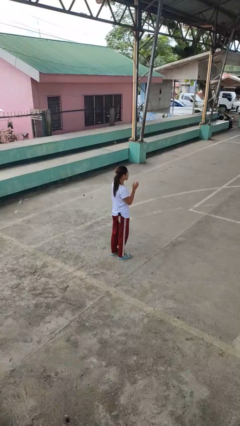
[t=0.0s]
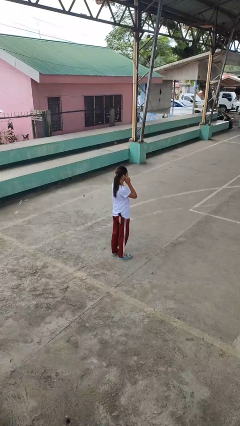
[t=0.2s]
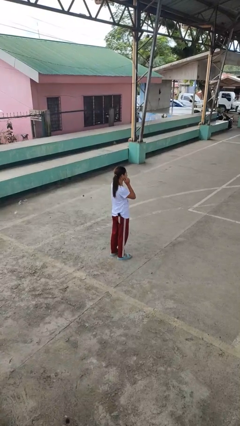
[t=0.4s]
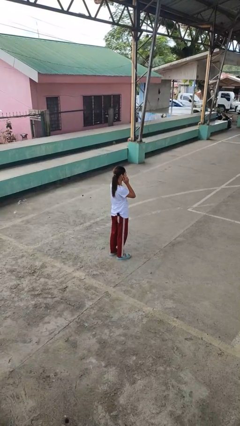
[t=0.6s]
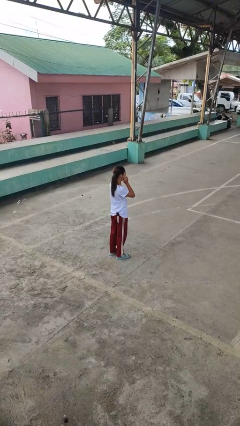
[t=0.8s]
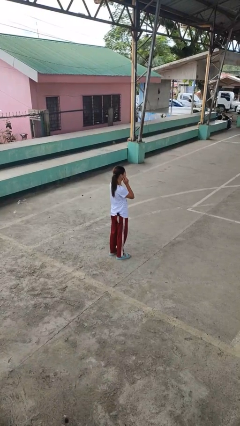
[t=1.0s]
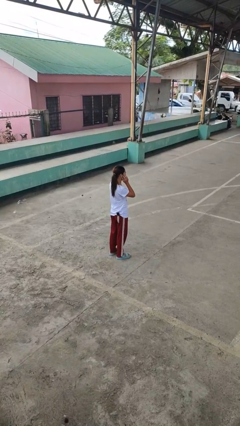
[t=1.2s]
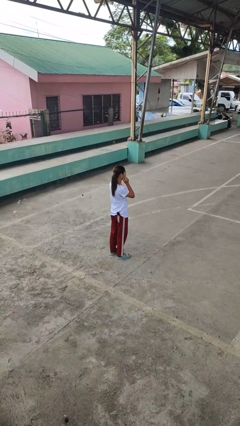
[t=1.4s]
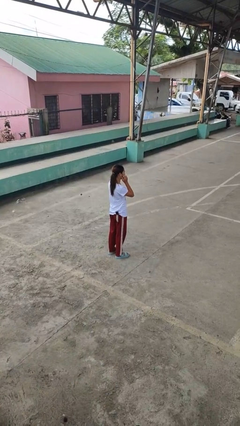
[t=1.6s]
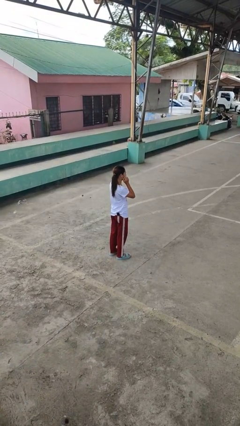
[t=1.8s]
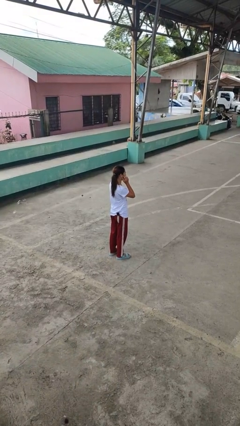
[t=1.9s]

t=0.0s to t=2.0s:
person scratches face

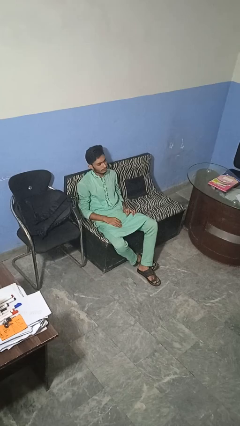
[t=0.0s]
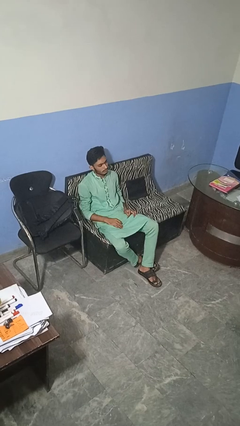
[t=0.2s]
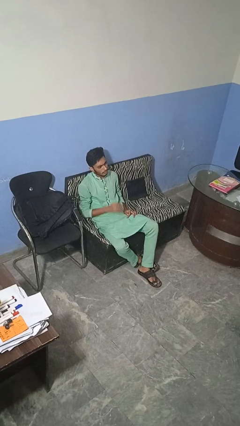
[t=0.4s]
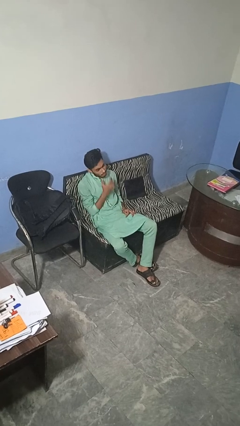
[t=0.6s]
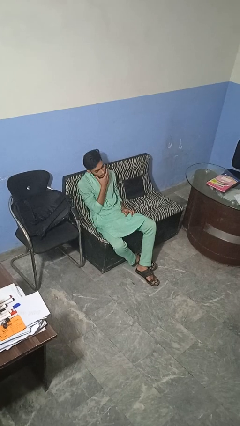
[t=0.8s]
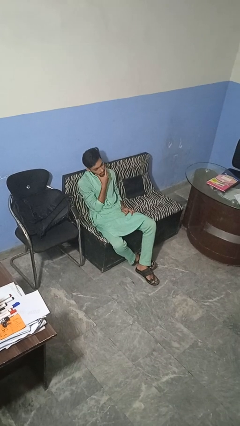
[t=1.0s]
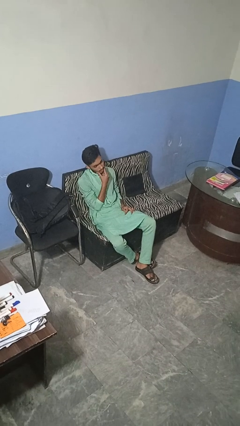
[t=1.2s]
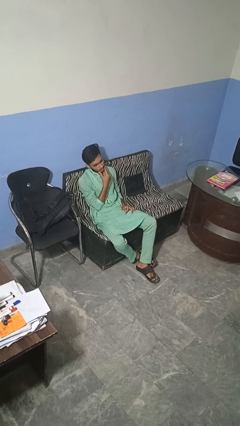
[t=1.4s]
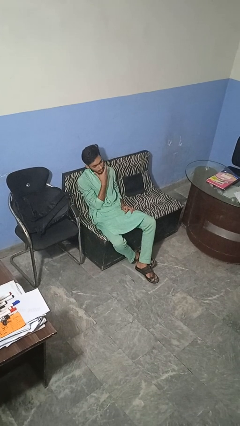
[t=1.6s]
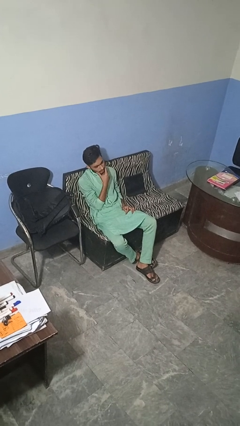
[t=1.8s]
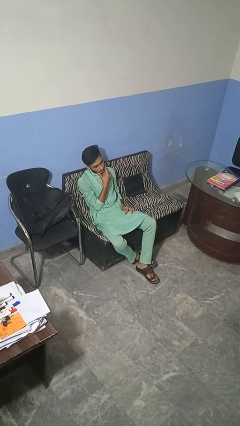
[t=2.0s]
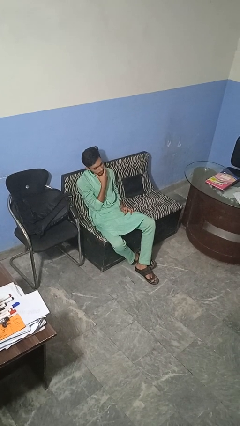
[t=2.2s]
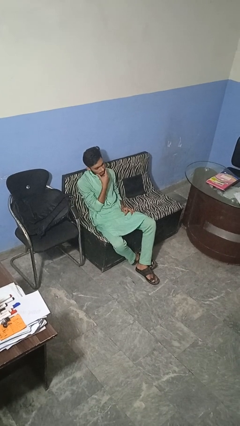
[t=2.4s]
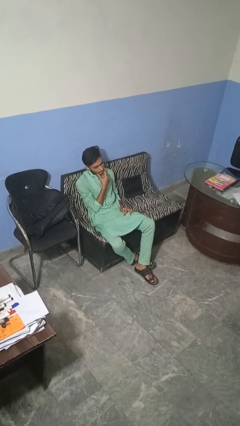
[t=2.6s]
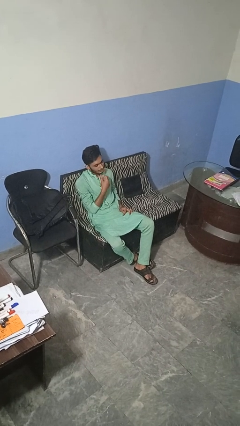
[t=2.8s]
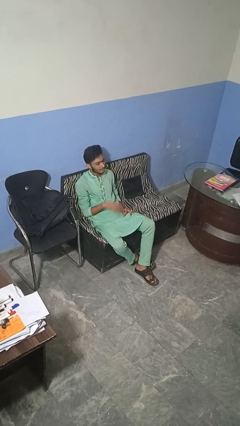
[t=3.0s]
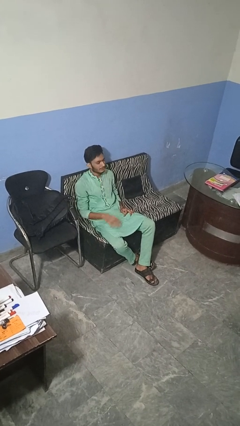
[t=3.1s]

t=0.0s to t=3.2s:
person strokes chin

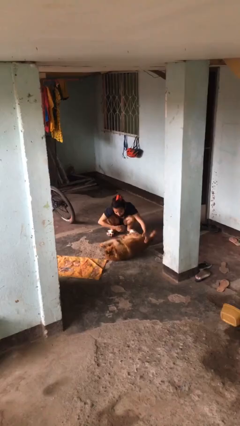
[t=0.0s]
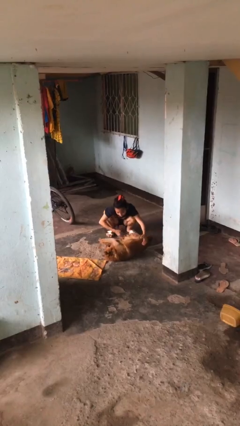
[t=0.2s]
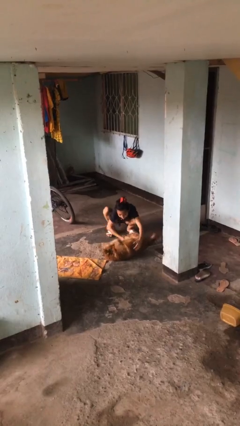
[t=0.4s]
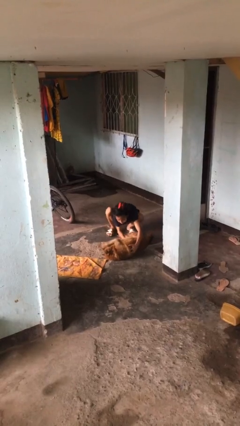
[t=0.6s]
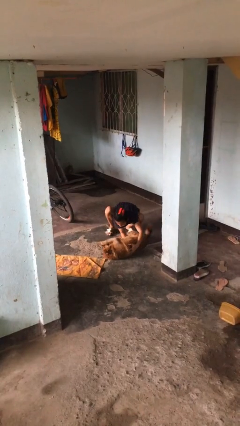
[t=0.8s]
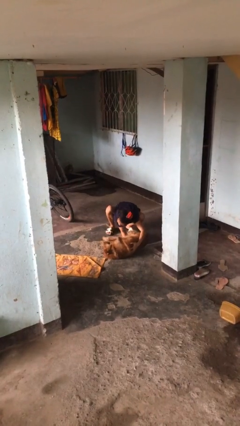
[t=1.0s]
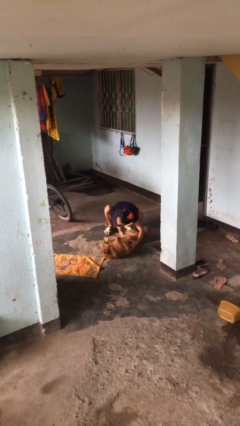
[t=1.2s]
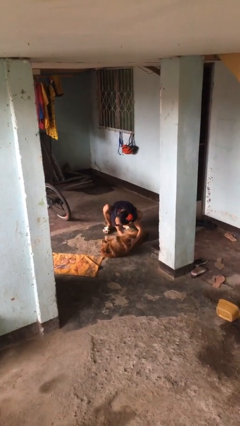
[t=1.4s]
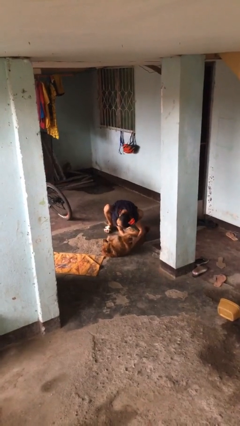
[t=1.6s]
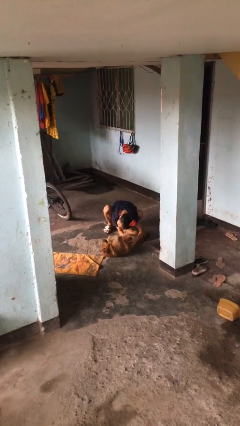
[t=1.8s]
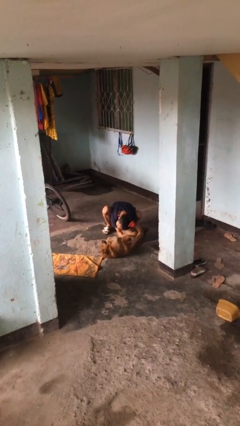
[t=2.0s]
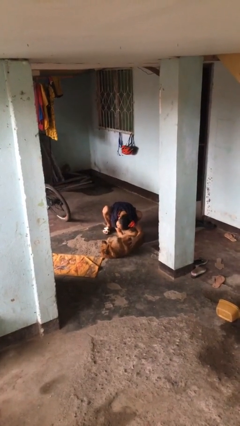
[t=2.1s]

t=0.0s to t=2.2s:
person hugs dog

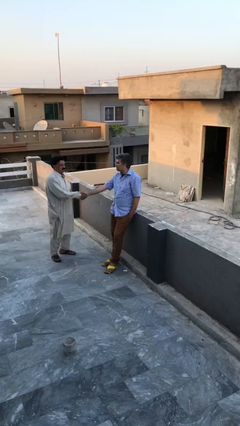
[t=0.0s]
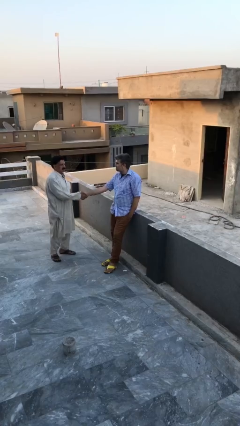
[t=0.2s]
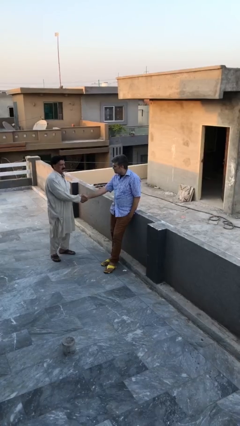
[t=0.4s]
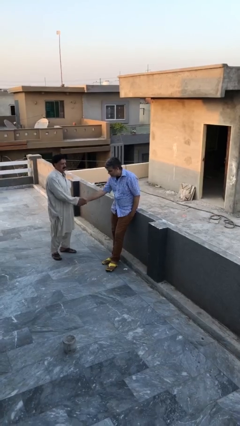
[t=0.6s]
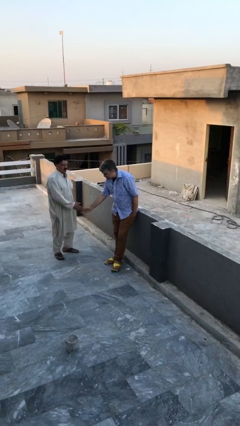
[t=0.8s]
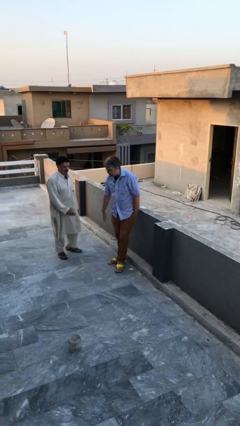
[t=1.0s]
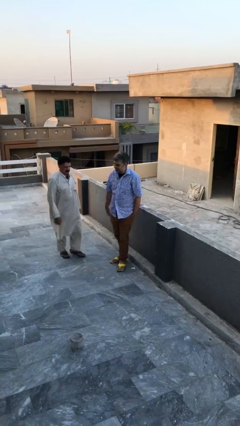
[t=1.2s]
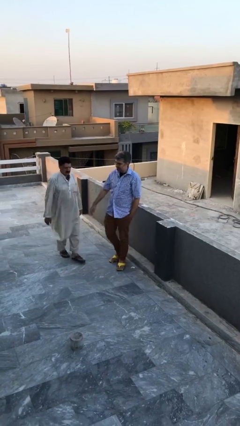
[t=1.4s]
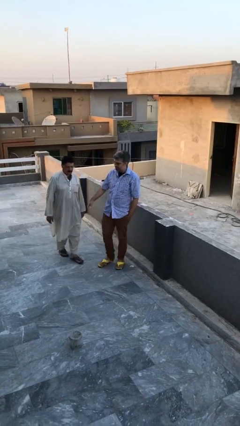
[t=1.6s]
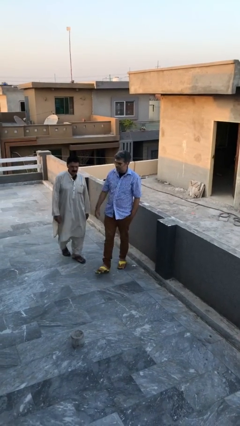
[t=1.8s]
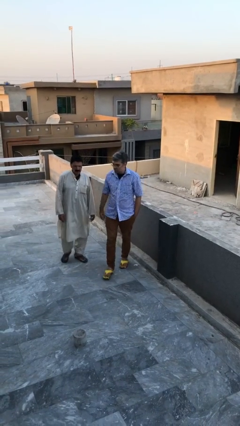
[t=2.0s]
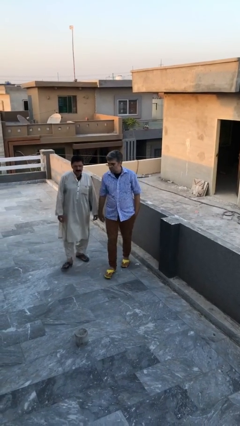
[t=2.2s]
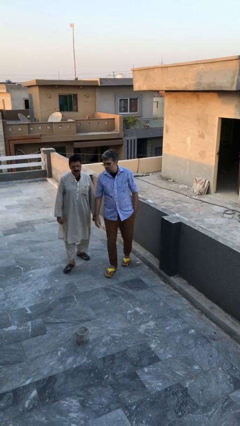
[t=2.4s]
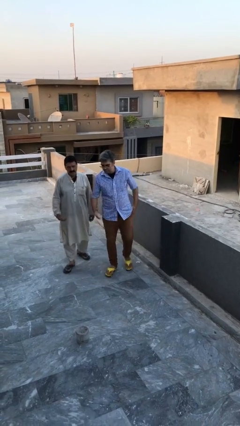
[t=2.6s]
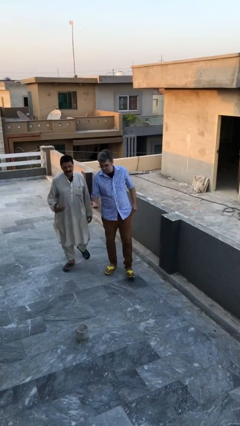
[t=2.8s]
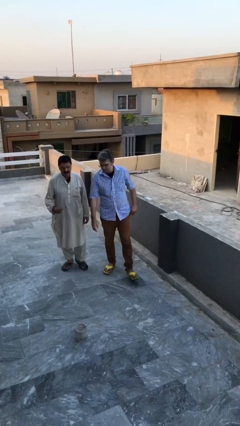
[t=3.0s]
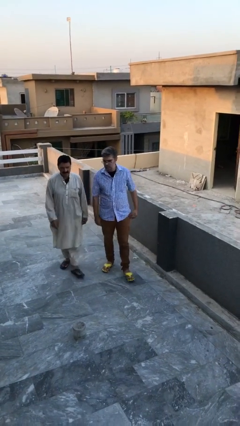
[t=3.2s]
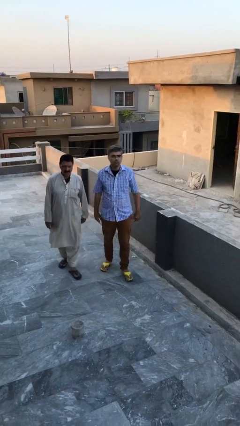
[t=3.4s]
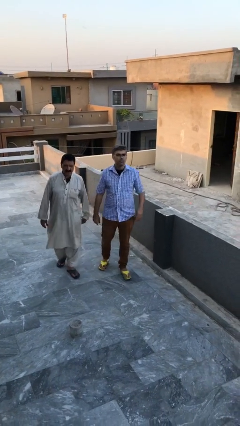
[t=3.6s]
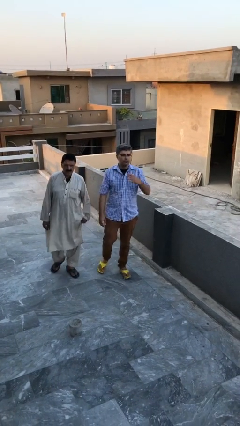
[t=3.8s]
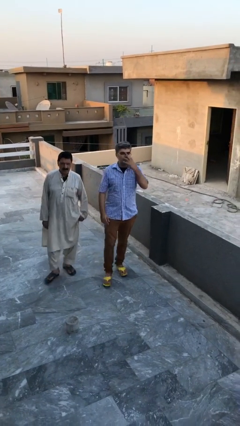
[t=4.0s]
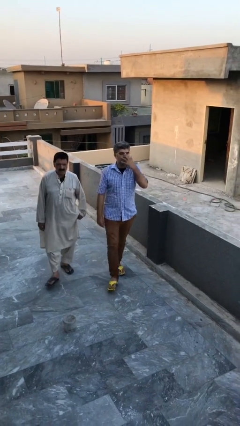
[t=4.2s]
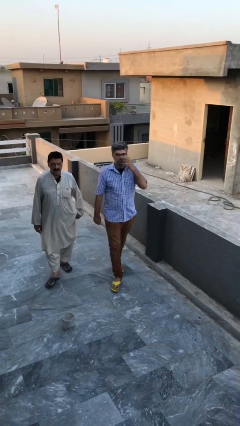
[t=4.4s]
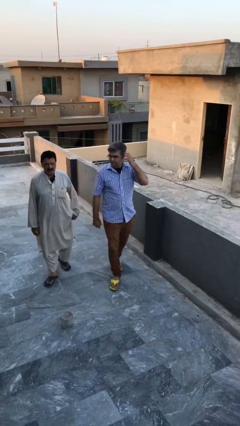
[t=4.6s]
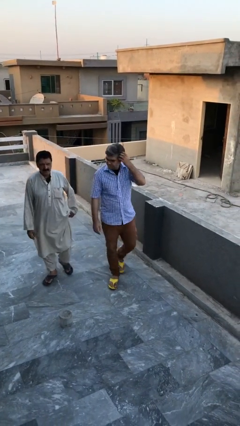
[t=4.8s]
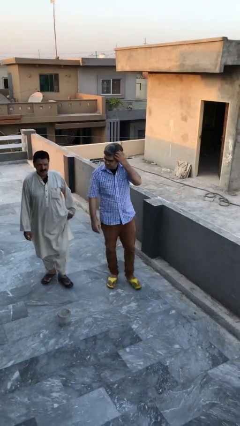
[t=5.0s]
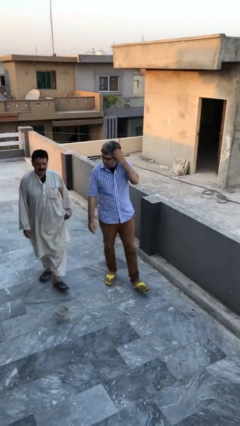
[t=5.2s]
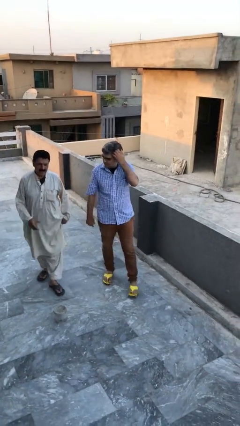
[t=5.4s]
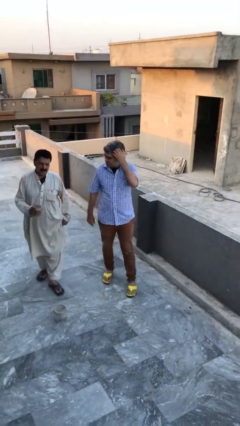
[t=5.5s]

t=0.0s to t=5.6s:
person talks to person

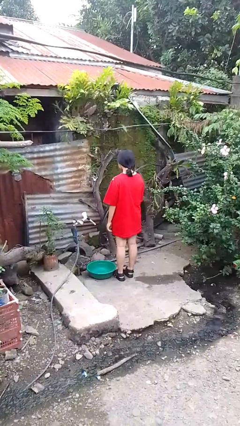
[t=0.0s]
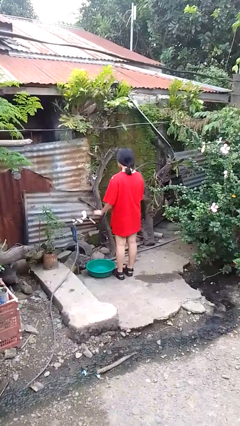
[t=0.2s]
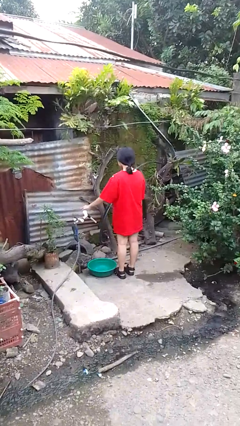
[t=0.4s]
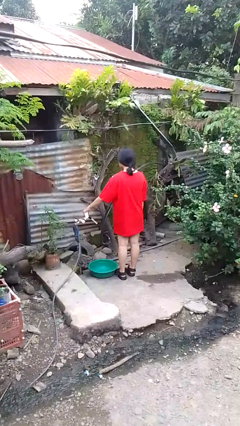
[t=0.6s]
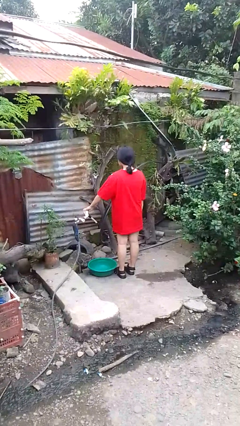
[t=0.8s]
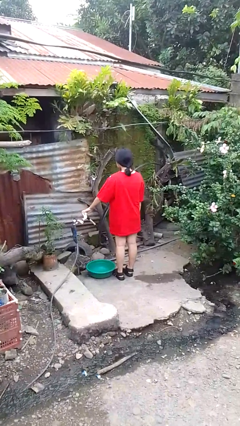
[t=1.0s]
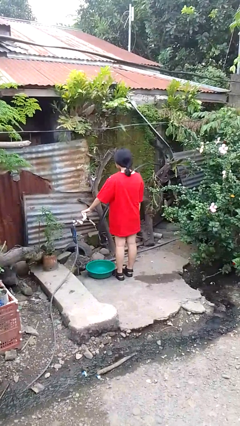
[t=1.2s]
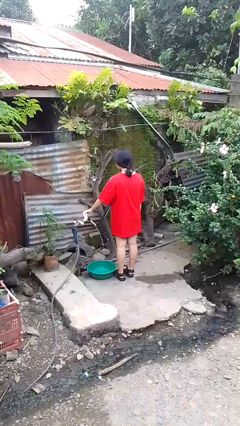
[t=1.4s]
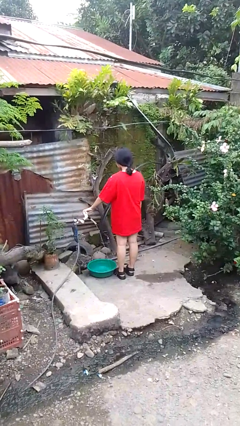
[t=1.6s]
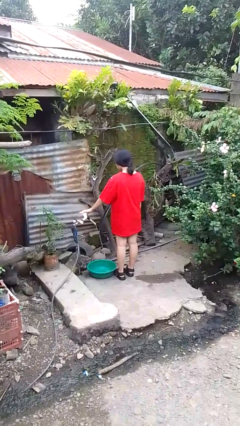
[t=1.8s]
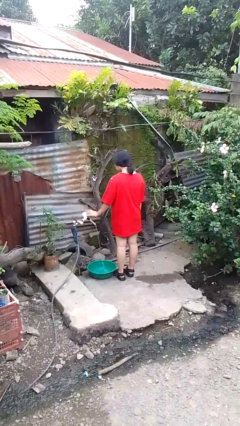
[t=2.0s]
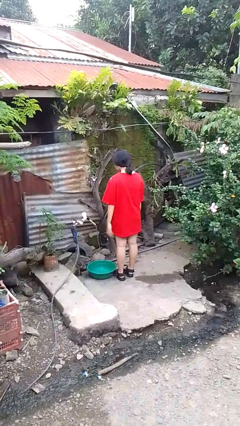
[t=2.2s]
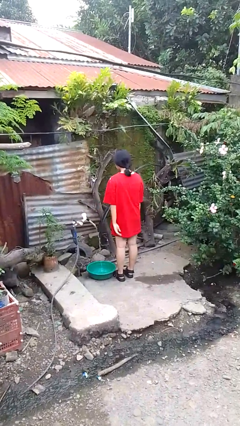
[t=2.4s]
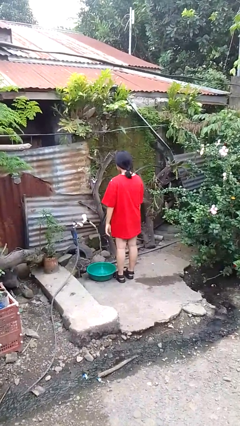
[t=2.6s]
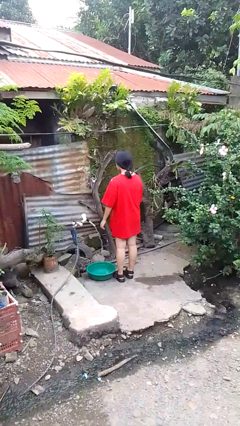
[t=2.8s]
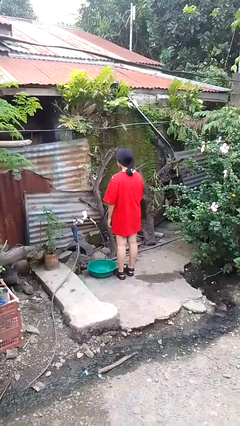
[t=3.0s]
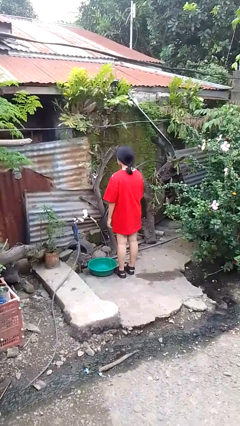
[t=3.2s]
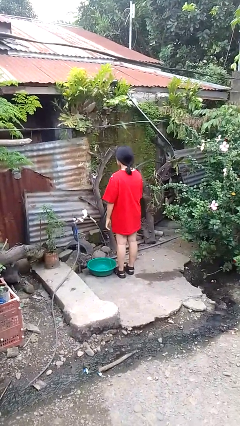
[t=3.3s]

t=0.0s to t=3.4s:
person turns on faucet

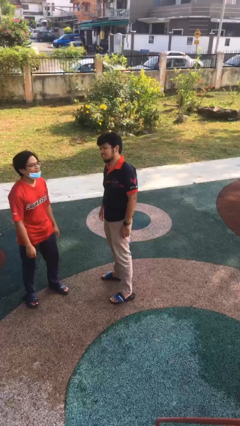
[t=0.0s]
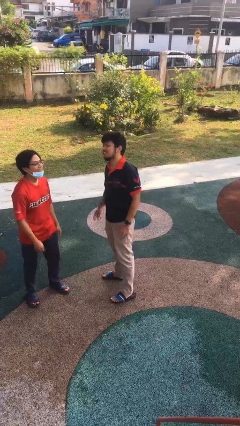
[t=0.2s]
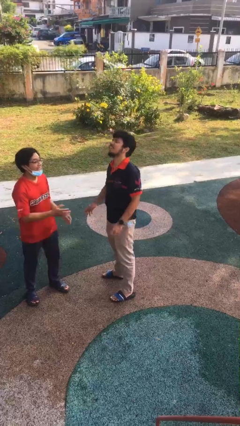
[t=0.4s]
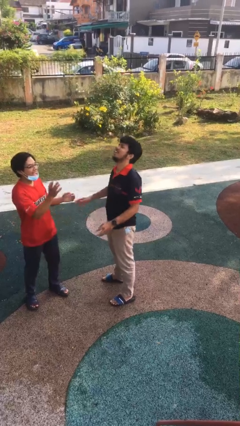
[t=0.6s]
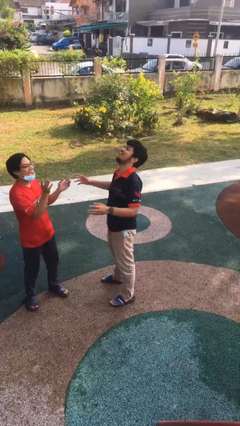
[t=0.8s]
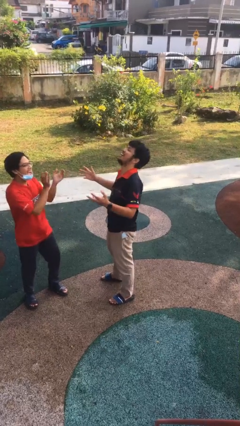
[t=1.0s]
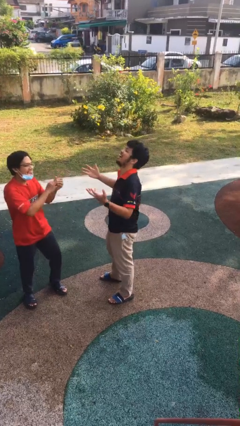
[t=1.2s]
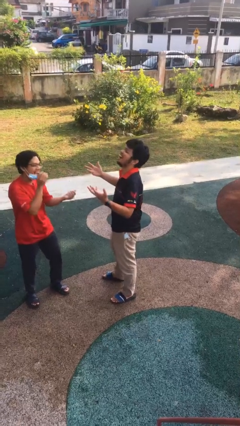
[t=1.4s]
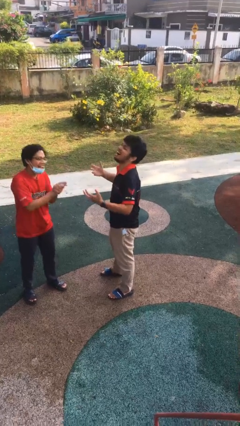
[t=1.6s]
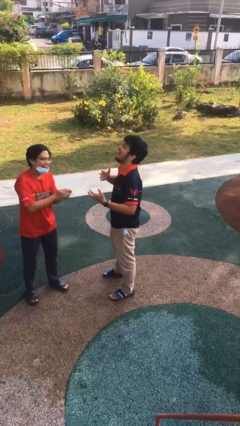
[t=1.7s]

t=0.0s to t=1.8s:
person laughs with person
